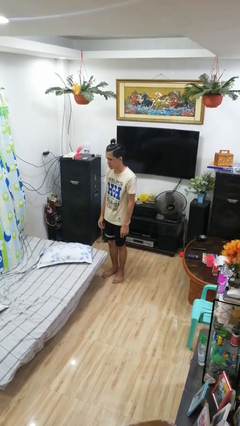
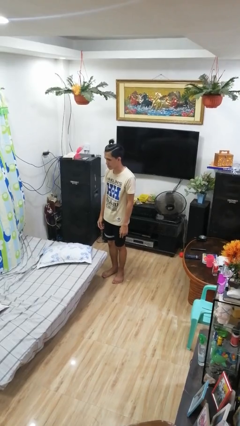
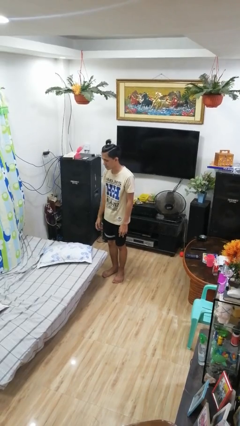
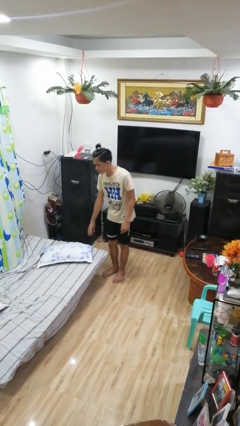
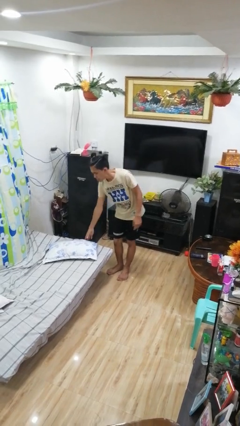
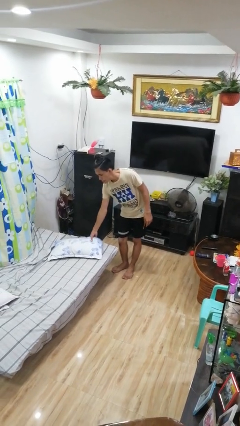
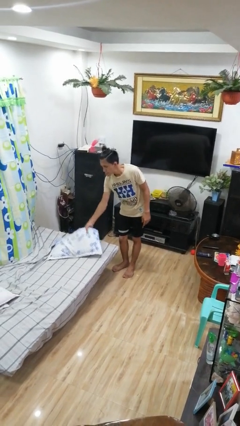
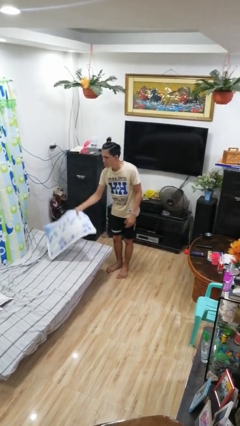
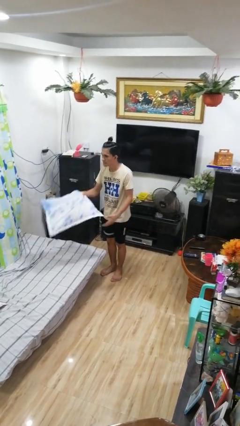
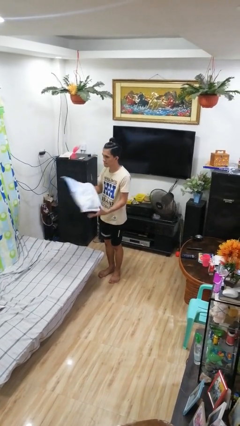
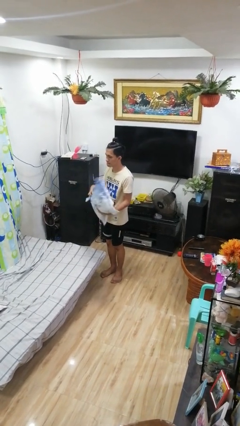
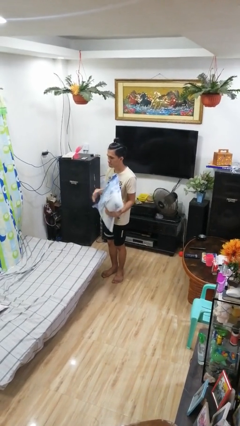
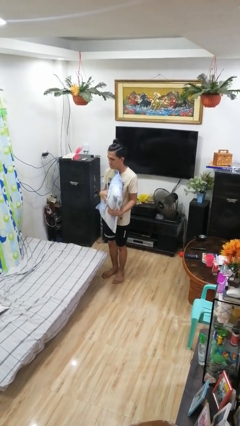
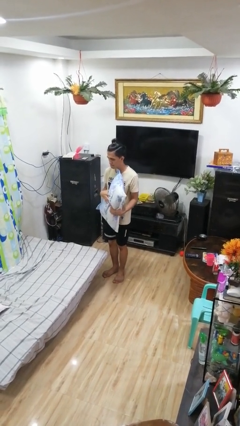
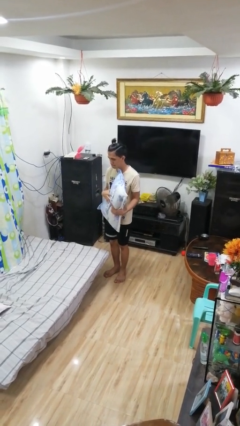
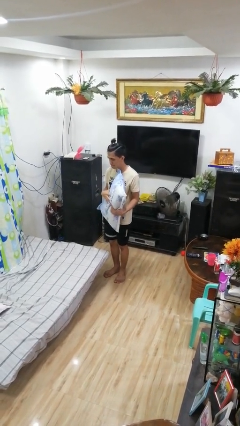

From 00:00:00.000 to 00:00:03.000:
person picks up object from bed

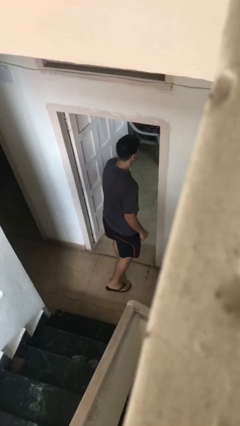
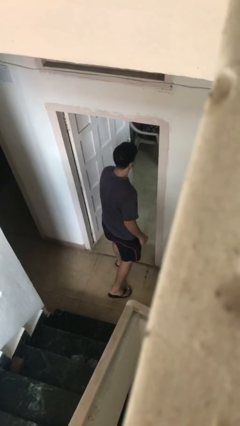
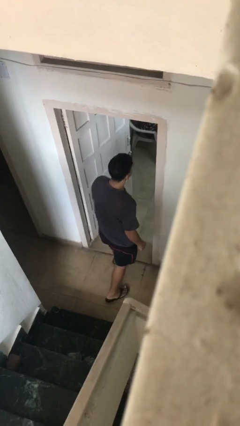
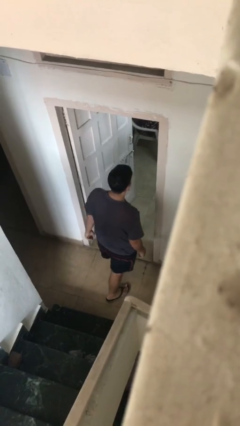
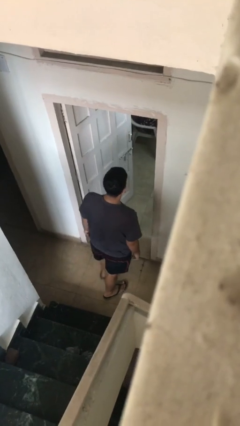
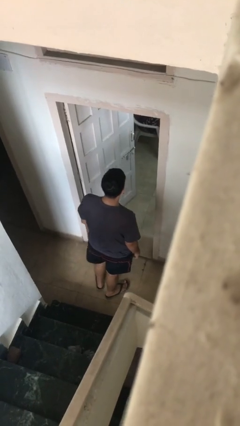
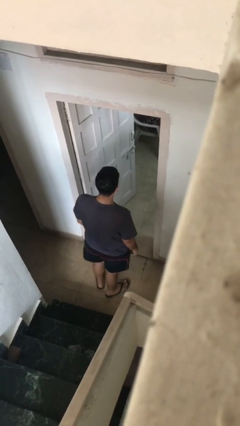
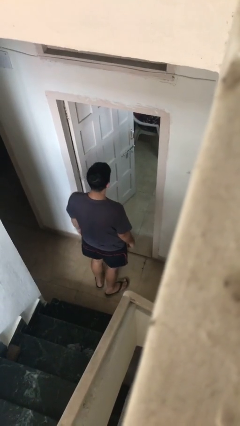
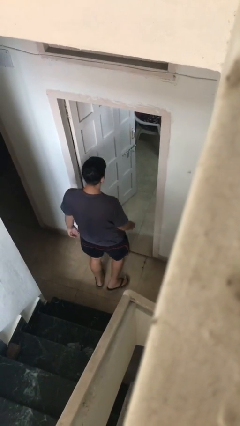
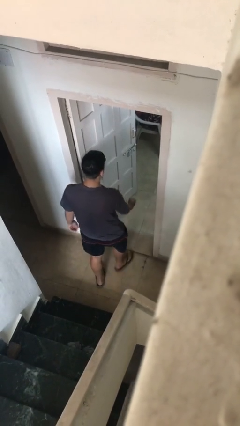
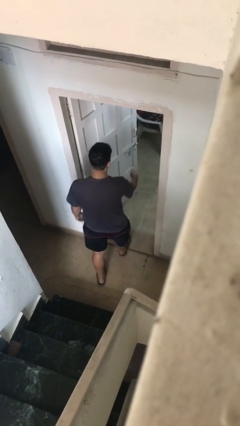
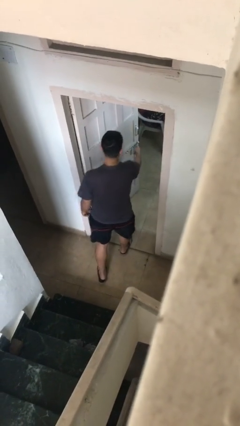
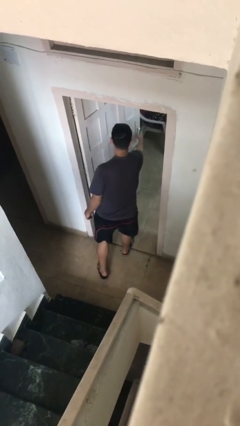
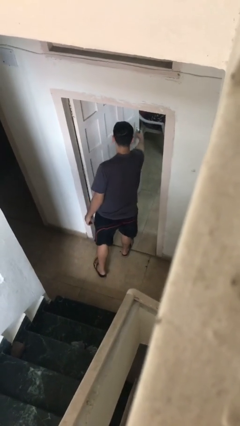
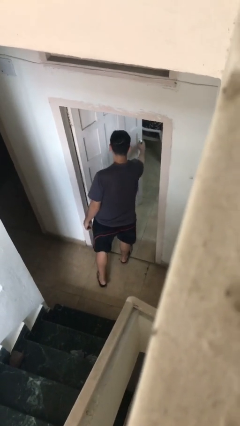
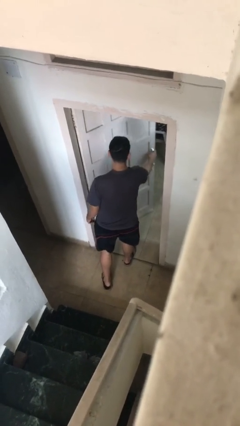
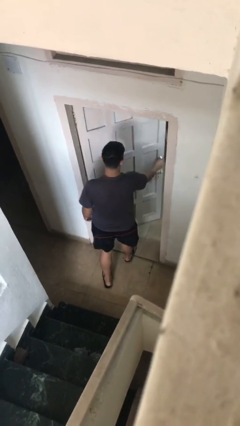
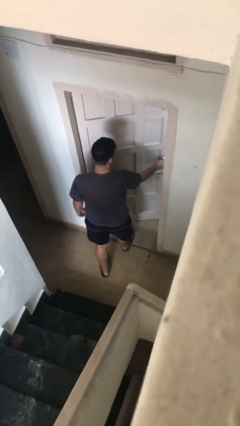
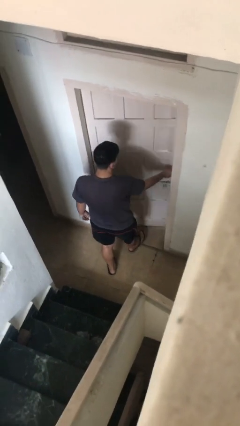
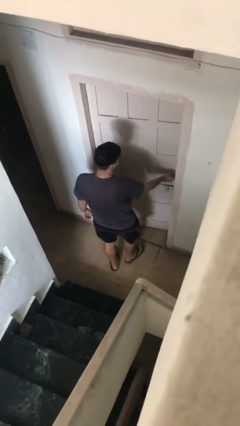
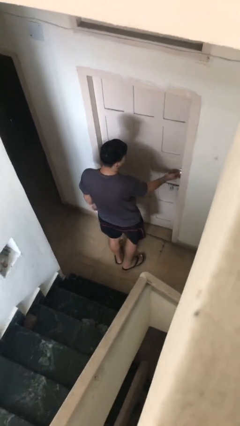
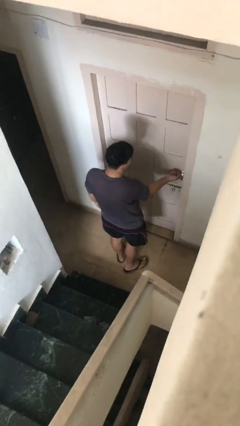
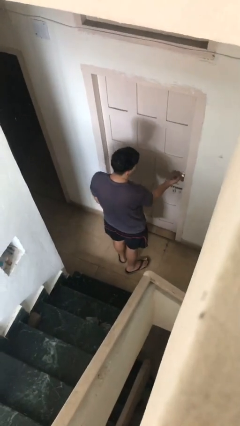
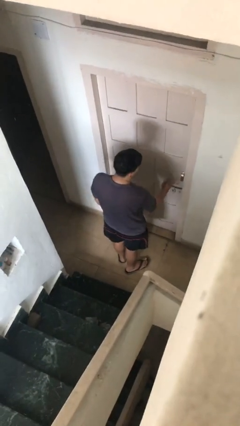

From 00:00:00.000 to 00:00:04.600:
person closes facility door

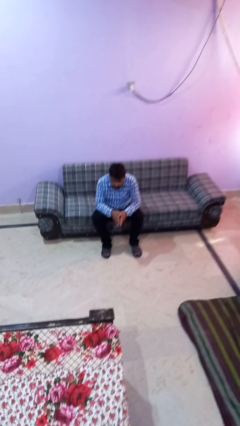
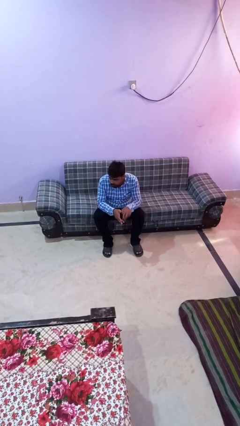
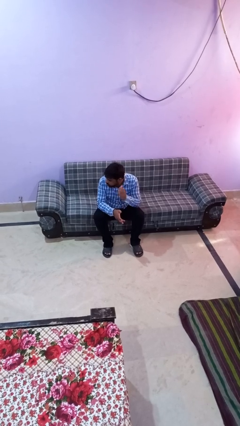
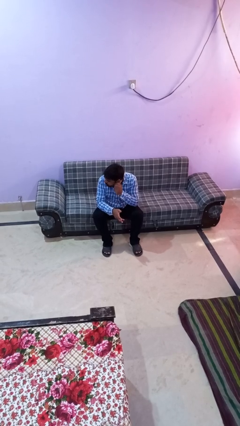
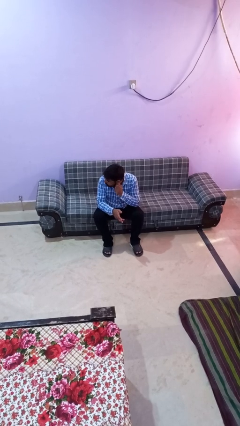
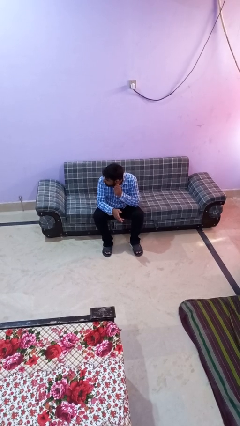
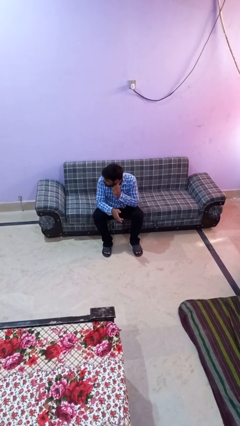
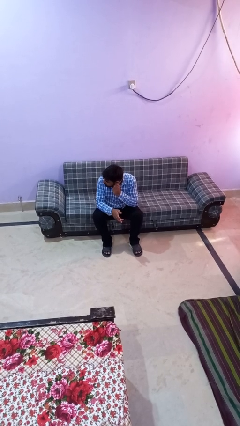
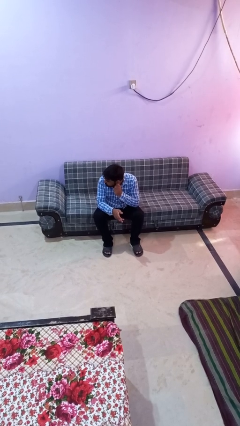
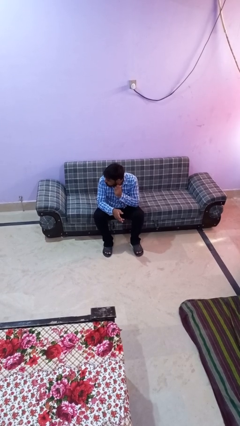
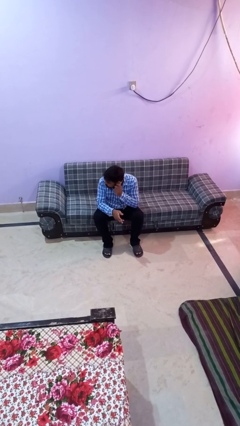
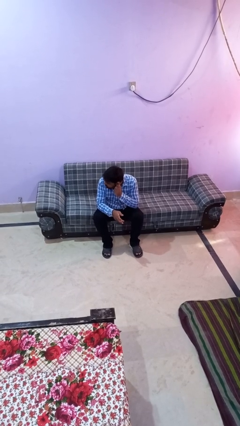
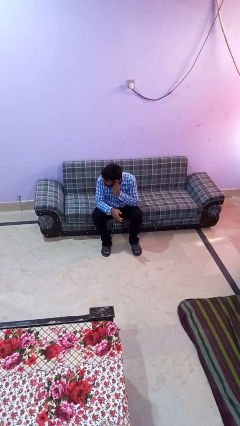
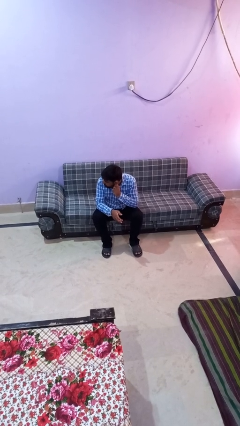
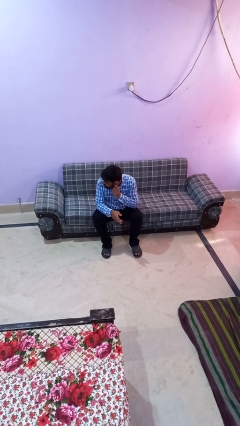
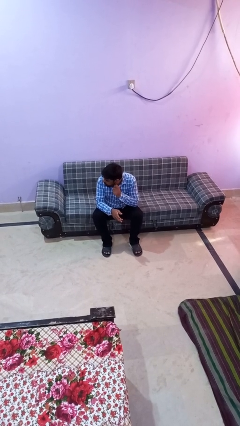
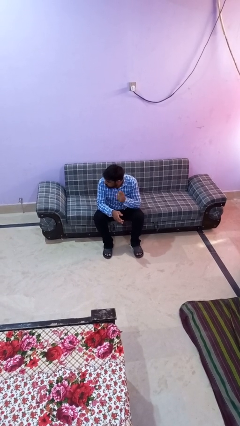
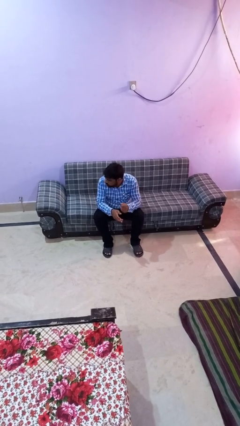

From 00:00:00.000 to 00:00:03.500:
person touches earlobe

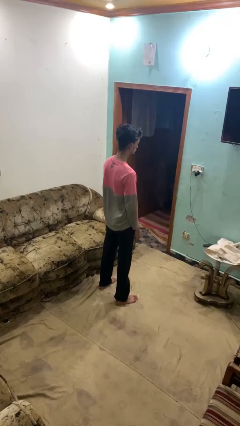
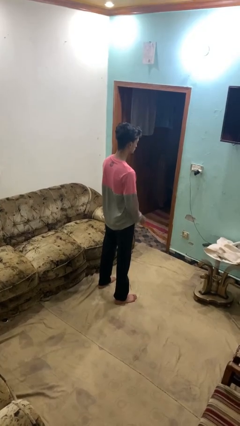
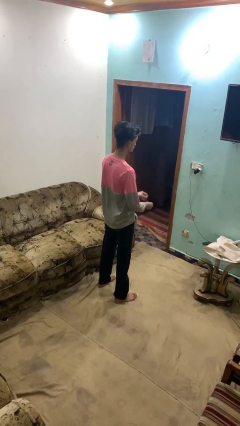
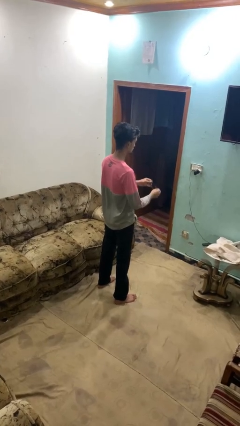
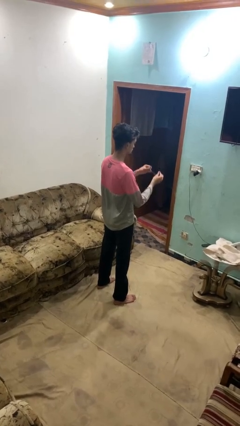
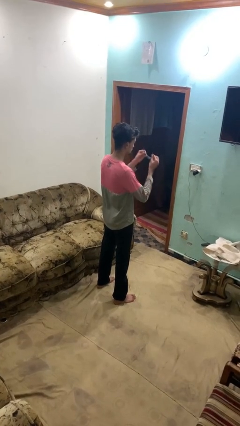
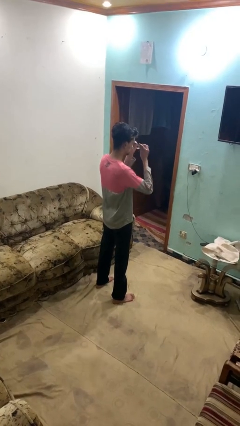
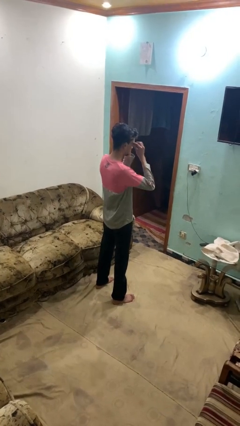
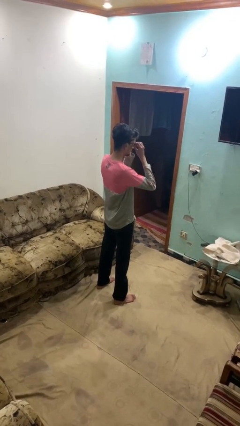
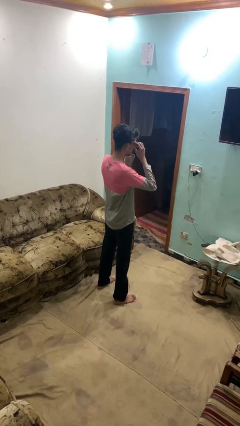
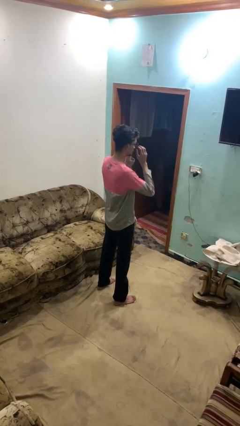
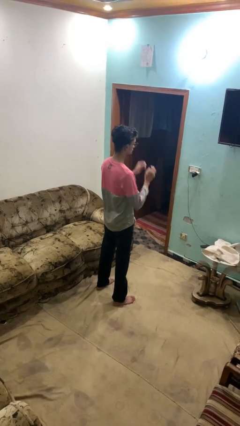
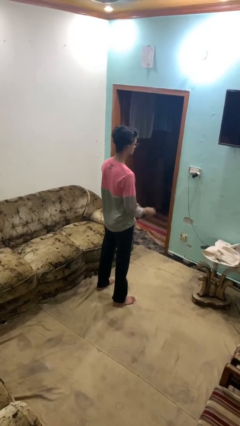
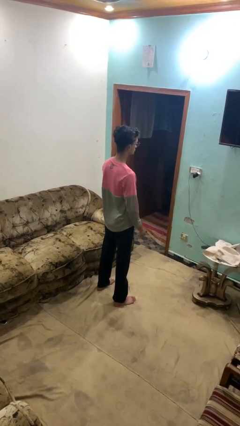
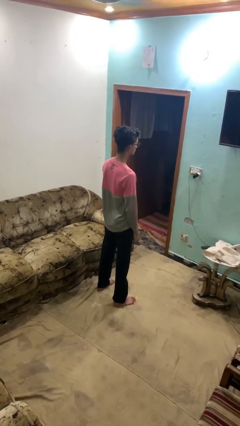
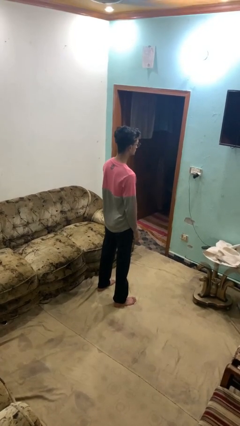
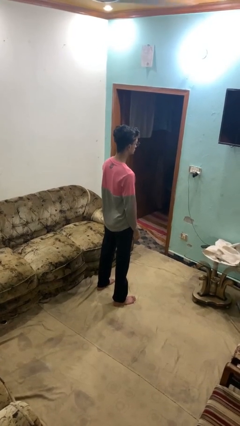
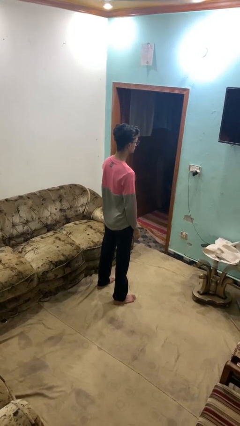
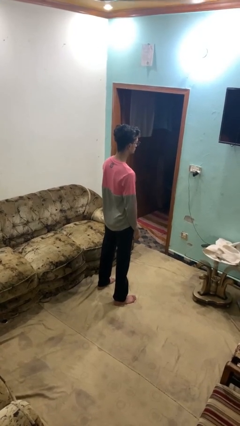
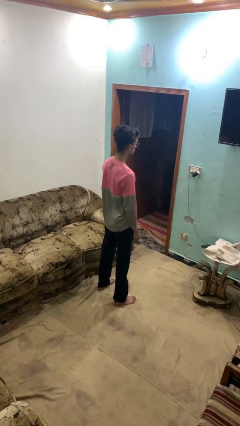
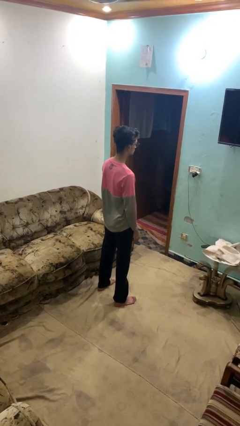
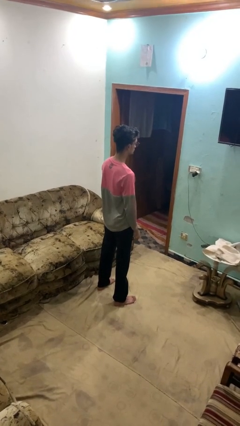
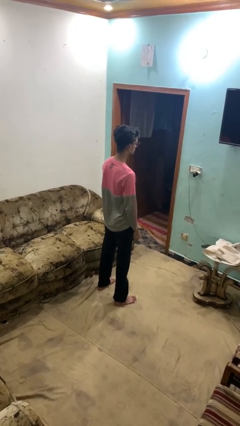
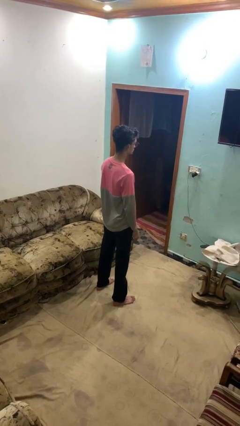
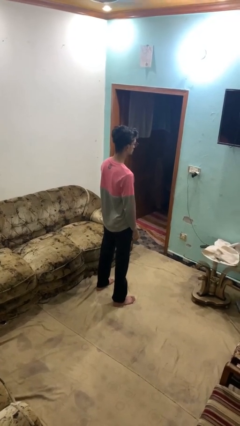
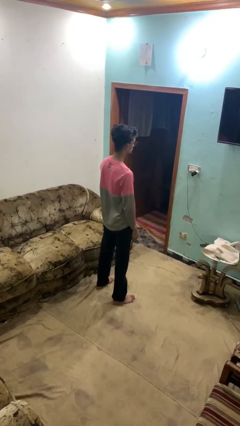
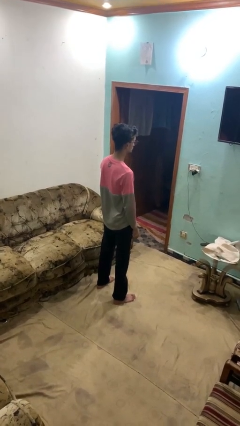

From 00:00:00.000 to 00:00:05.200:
person puts on glasses

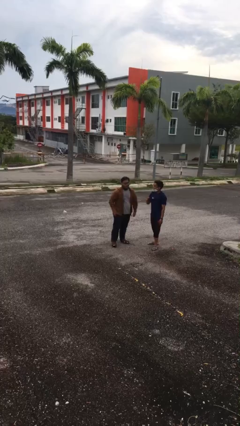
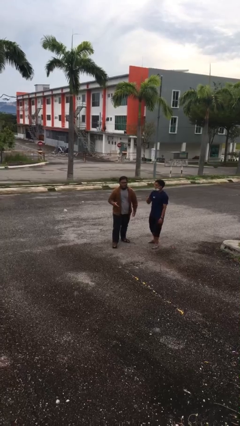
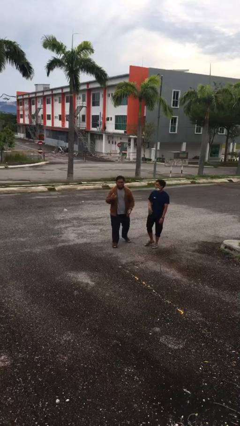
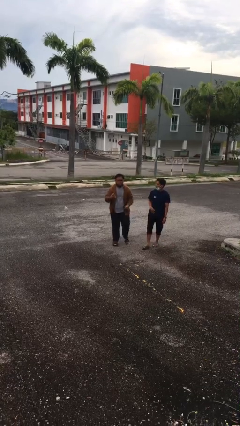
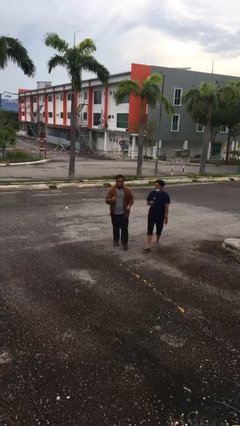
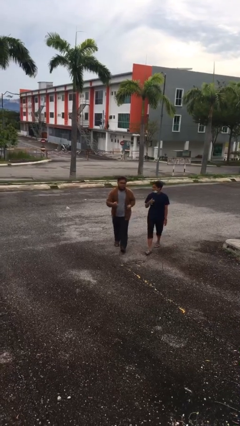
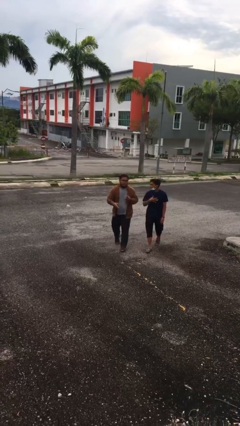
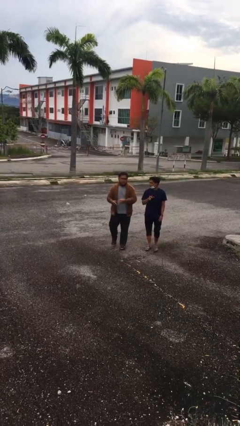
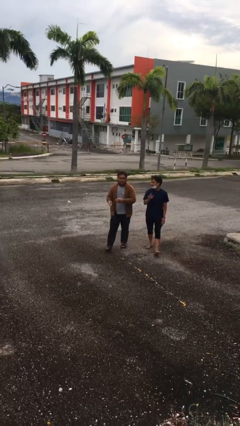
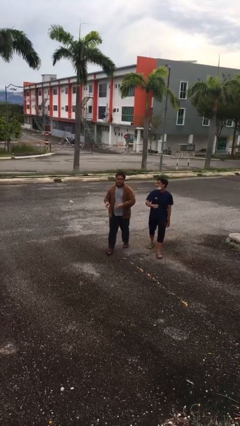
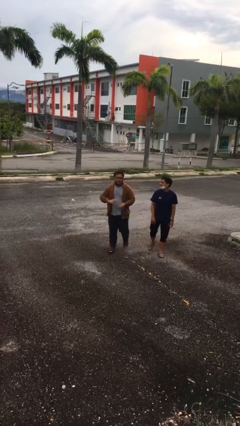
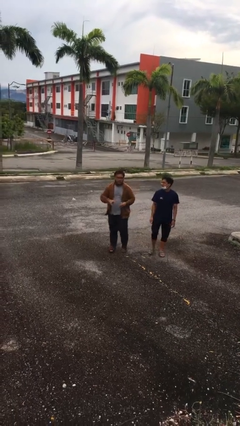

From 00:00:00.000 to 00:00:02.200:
person talks to person
